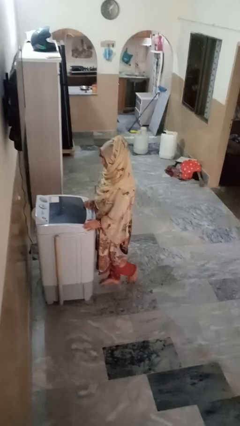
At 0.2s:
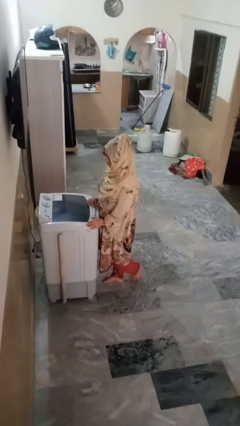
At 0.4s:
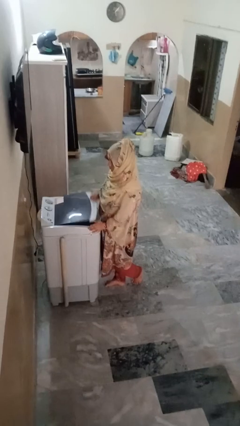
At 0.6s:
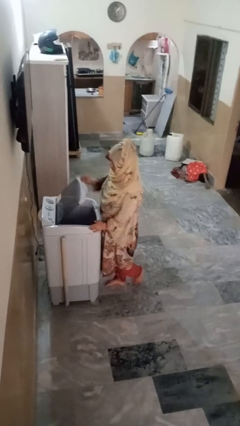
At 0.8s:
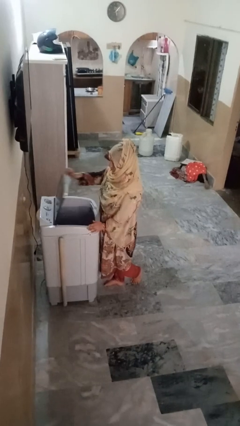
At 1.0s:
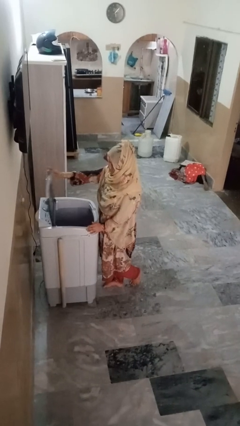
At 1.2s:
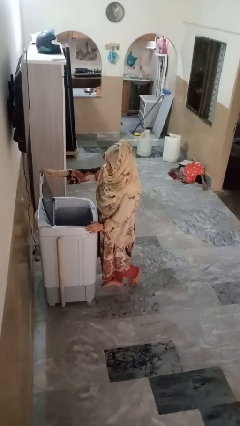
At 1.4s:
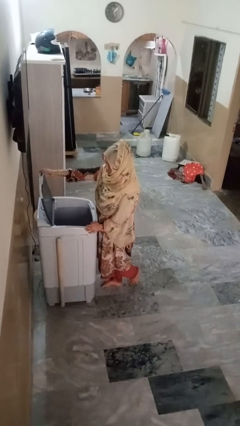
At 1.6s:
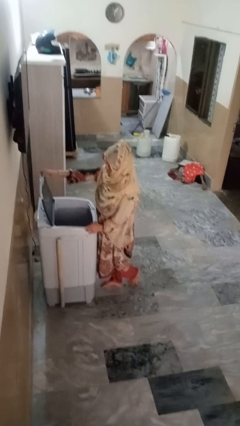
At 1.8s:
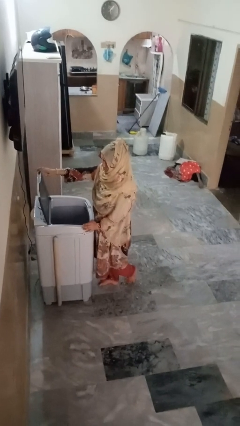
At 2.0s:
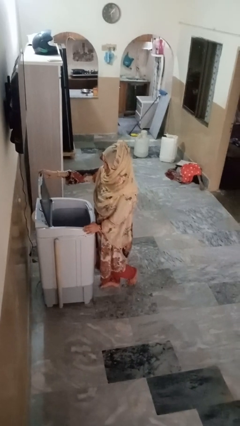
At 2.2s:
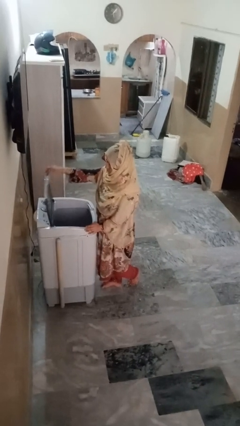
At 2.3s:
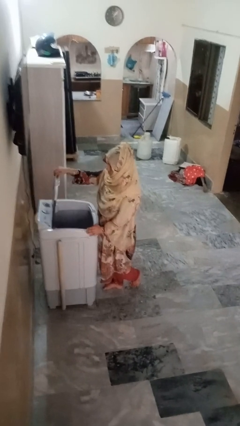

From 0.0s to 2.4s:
person opens clothes washer

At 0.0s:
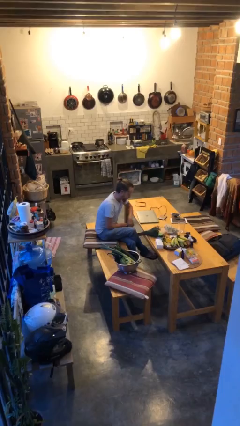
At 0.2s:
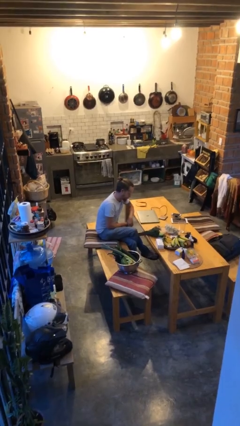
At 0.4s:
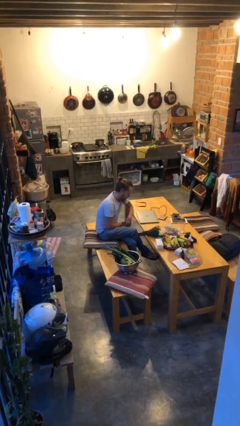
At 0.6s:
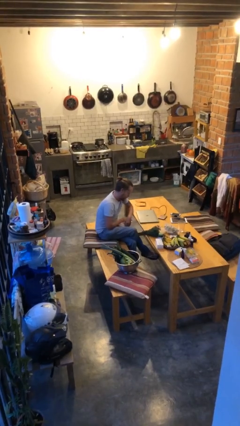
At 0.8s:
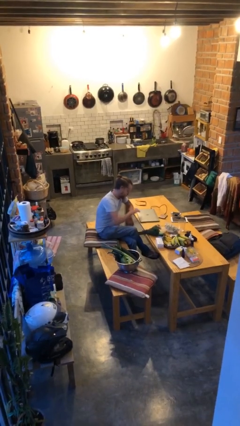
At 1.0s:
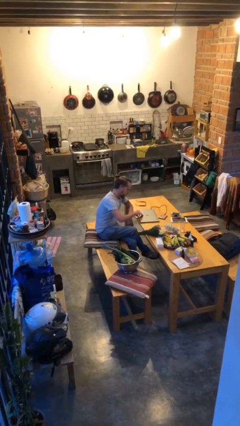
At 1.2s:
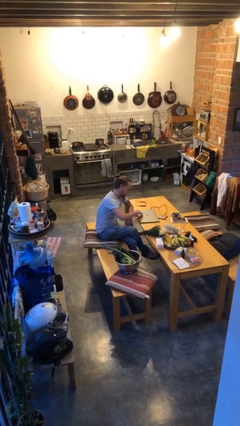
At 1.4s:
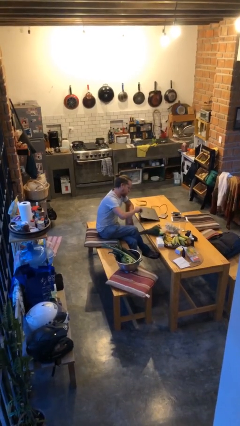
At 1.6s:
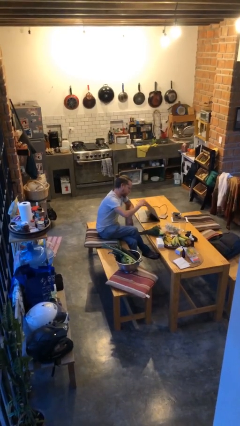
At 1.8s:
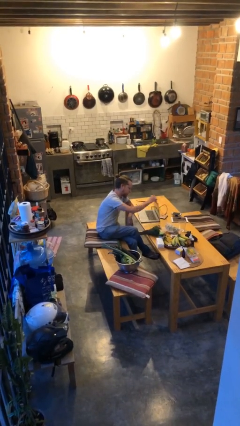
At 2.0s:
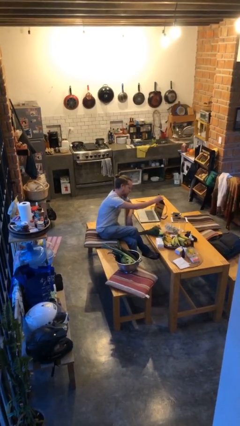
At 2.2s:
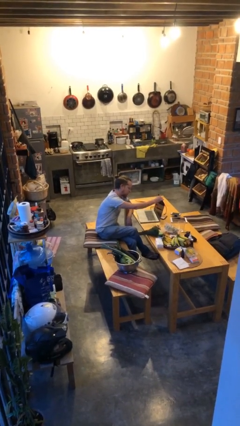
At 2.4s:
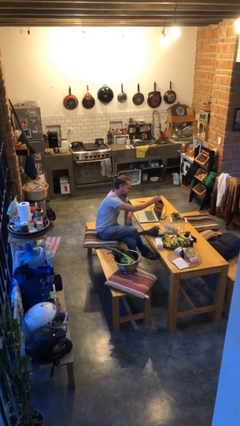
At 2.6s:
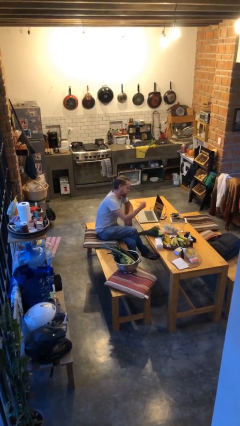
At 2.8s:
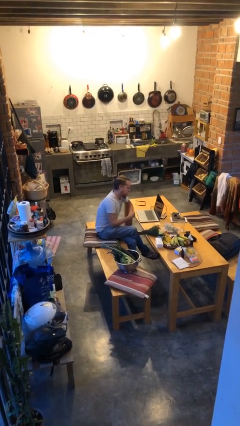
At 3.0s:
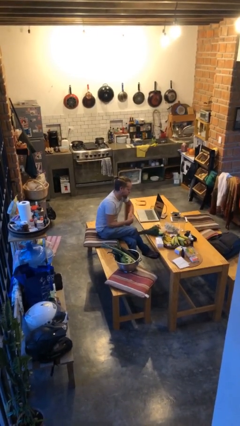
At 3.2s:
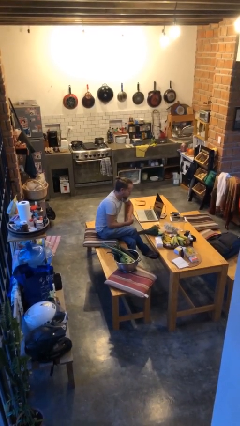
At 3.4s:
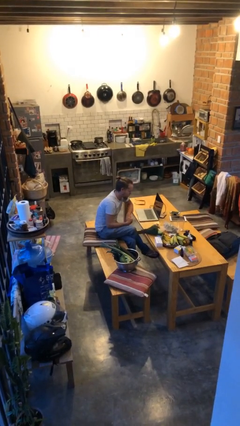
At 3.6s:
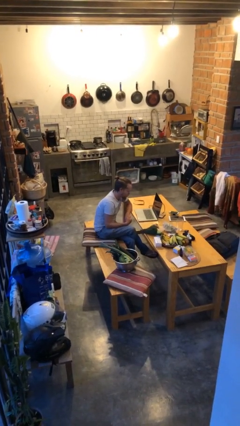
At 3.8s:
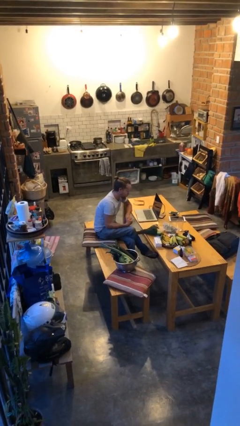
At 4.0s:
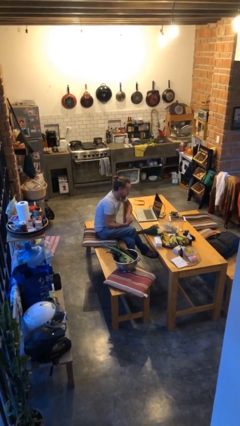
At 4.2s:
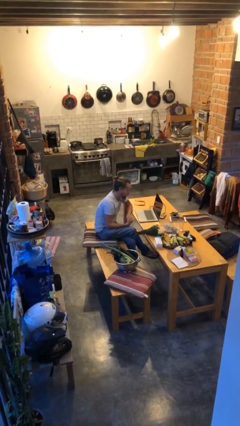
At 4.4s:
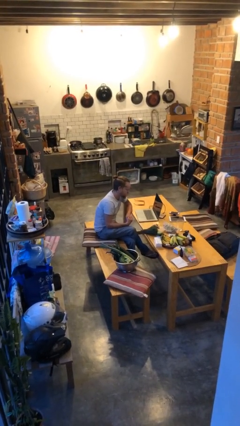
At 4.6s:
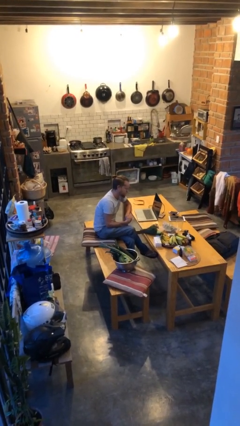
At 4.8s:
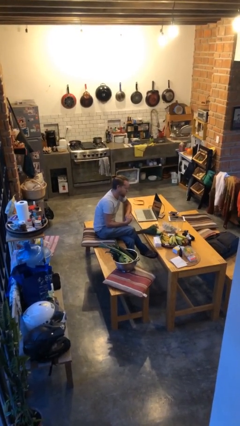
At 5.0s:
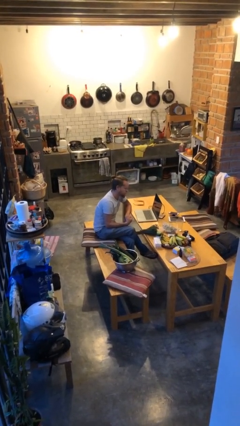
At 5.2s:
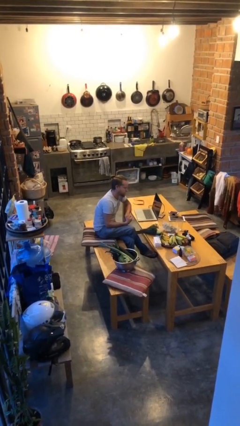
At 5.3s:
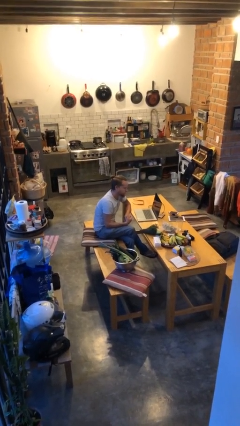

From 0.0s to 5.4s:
person opens laptop

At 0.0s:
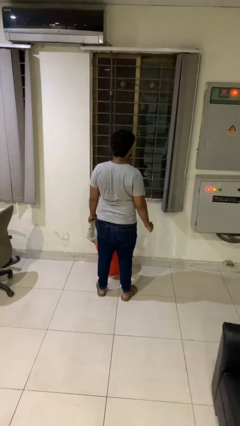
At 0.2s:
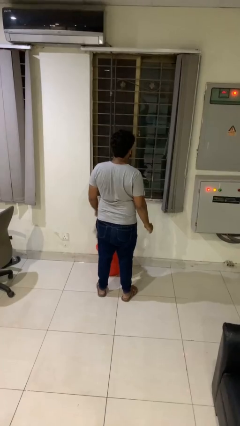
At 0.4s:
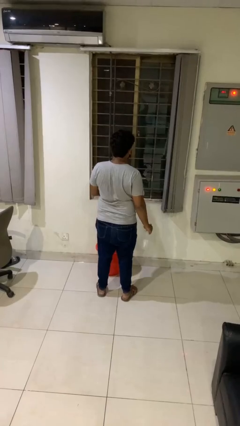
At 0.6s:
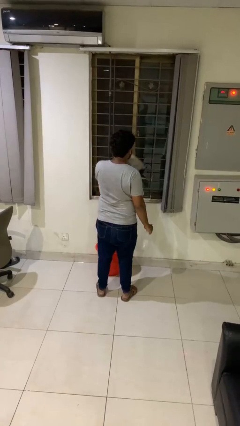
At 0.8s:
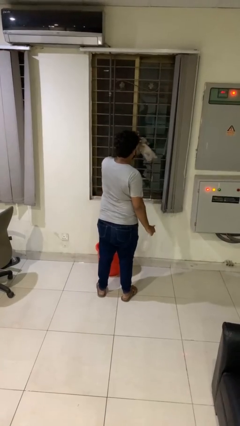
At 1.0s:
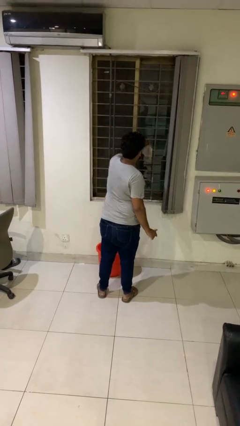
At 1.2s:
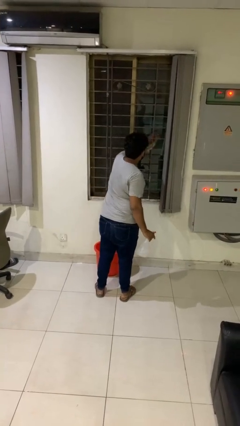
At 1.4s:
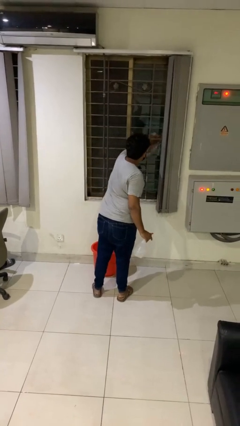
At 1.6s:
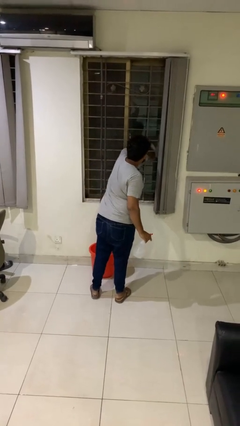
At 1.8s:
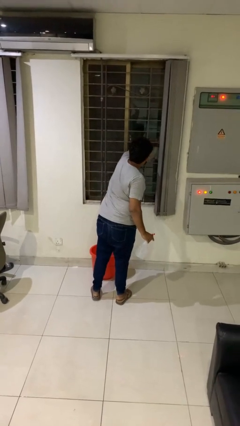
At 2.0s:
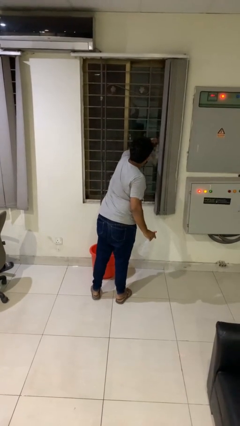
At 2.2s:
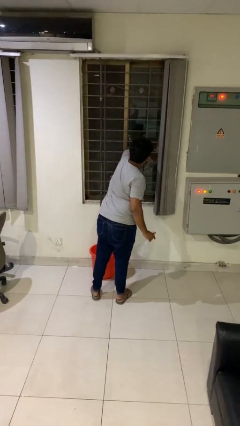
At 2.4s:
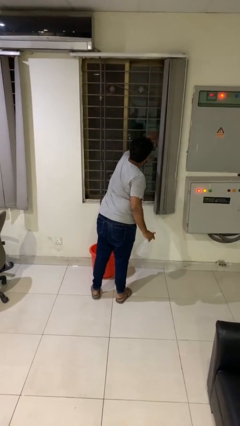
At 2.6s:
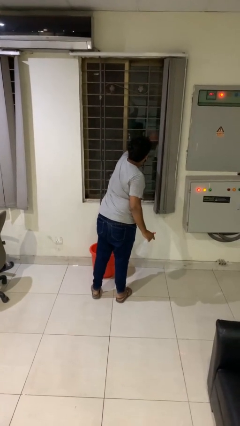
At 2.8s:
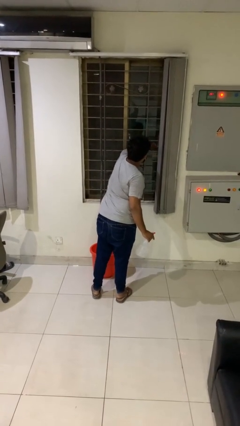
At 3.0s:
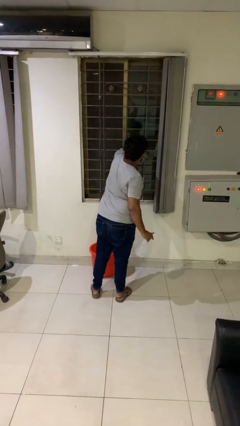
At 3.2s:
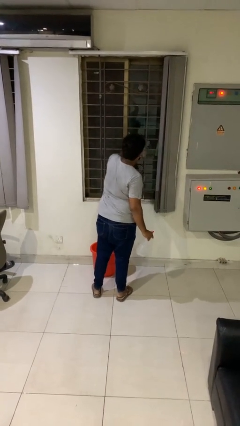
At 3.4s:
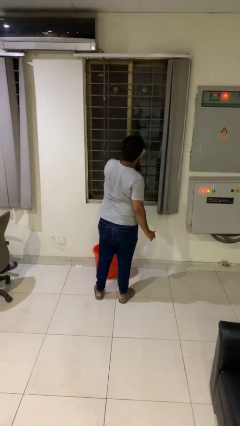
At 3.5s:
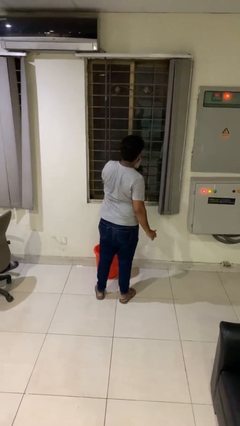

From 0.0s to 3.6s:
person washes window

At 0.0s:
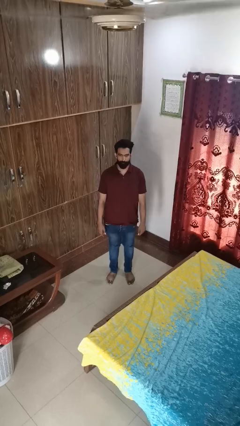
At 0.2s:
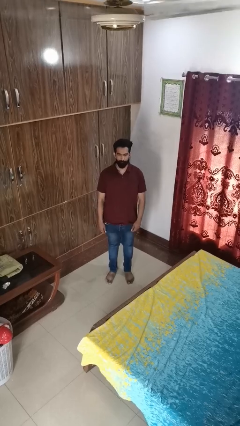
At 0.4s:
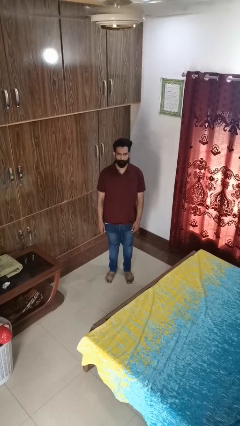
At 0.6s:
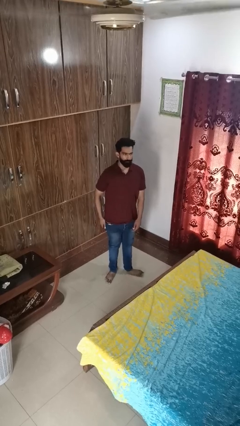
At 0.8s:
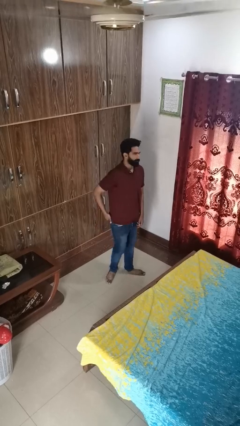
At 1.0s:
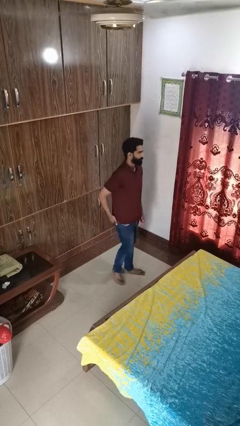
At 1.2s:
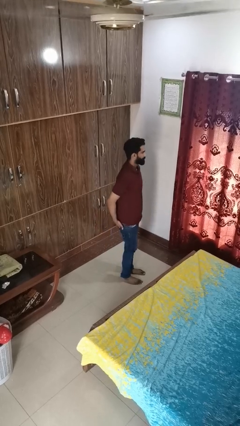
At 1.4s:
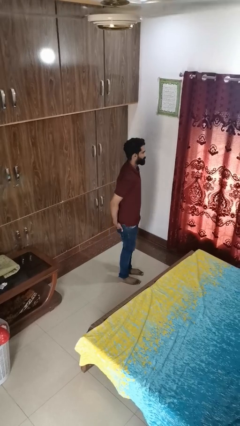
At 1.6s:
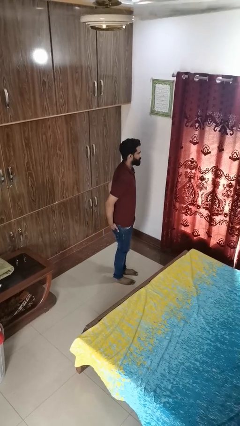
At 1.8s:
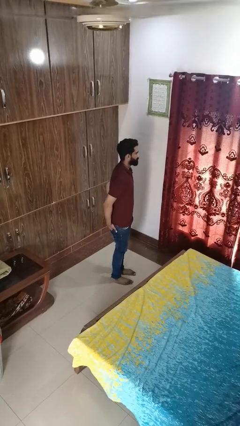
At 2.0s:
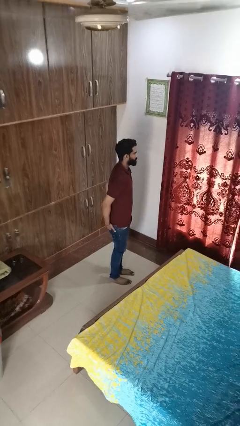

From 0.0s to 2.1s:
person puts hands in back pockets

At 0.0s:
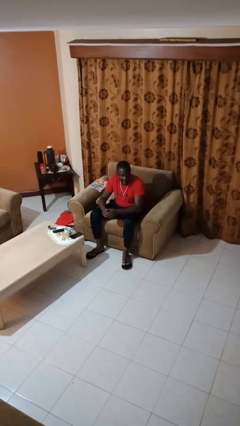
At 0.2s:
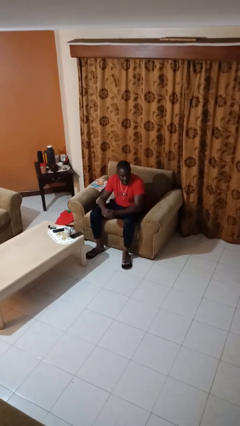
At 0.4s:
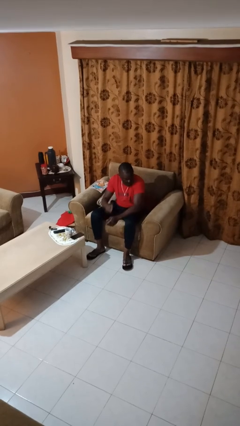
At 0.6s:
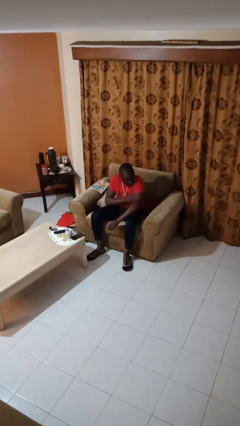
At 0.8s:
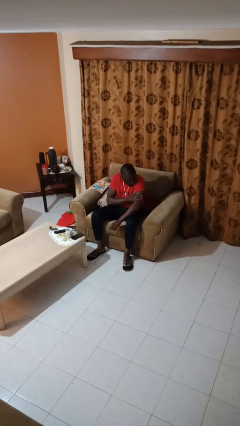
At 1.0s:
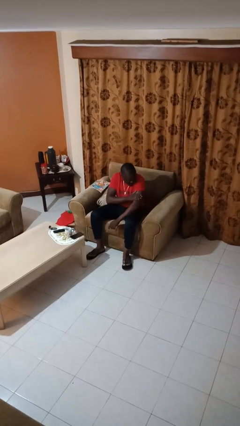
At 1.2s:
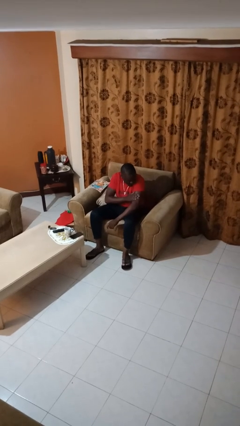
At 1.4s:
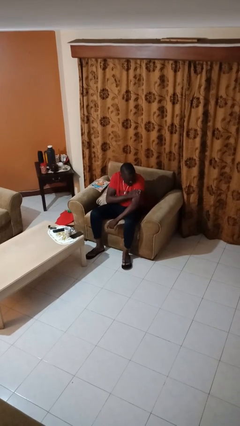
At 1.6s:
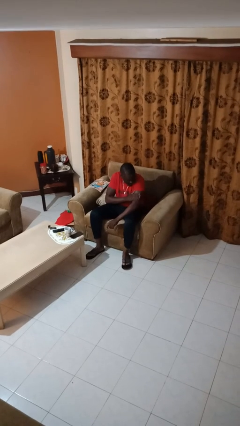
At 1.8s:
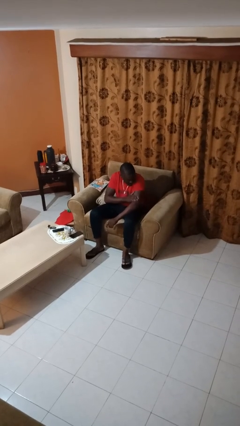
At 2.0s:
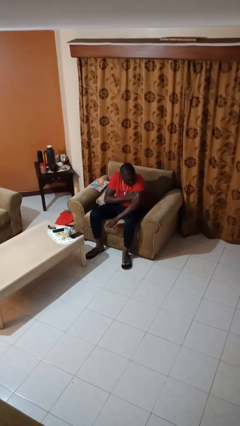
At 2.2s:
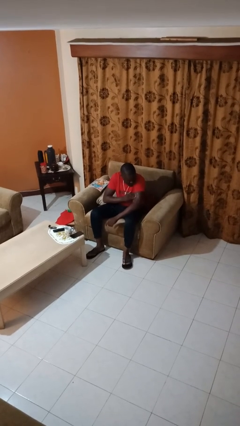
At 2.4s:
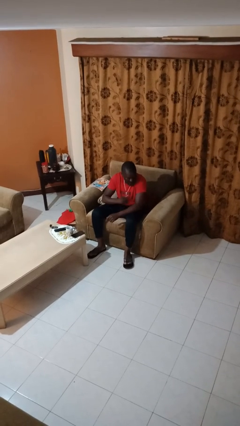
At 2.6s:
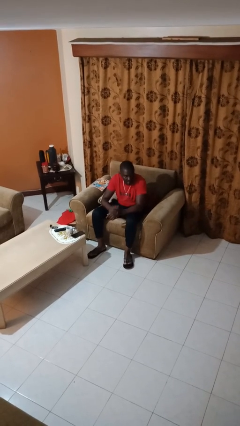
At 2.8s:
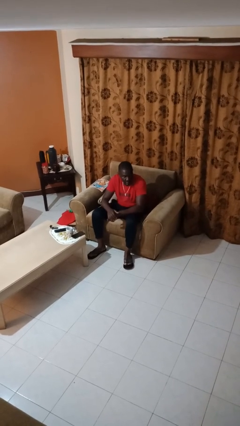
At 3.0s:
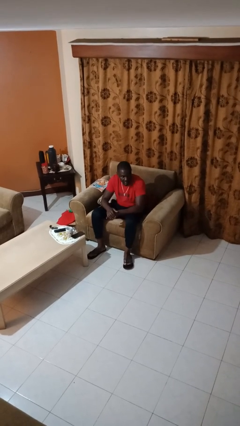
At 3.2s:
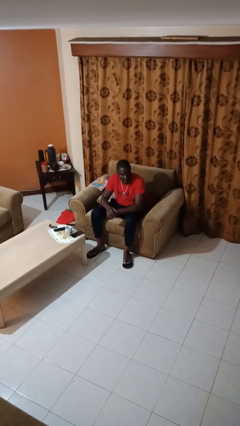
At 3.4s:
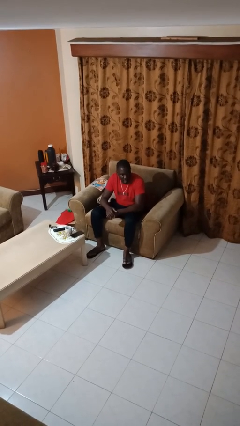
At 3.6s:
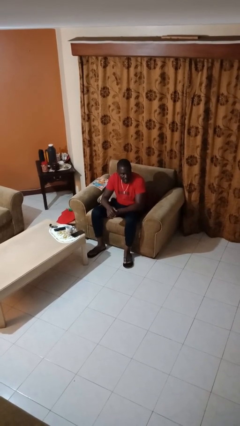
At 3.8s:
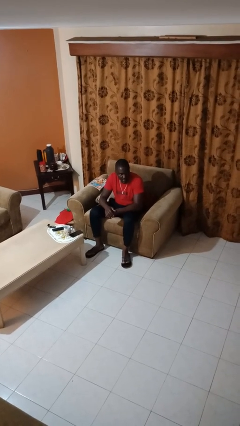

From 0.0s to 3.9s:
person swats bug

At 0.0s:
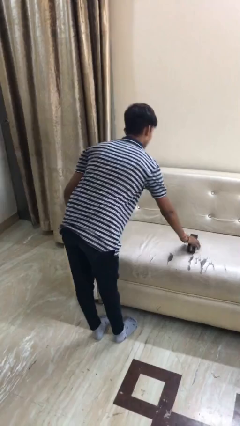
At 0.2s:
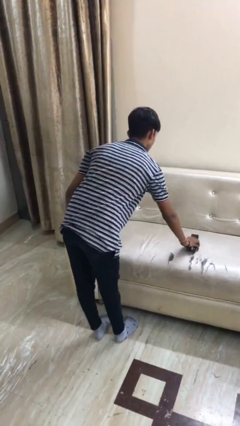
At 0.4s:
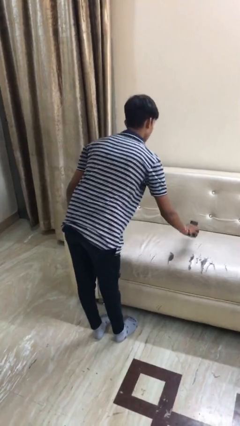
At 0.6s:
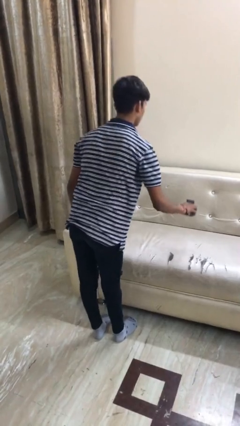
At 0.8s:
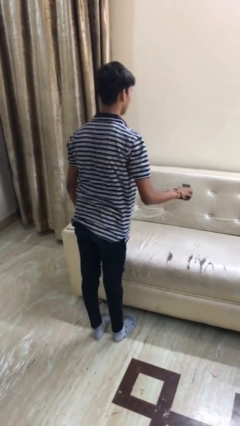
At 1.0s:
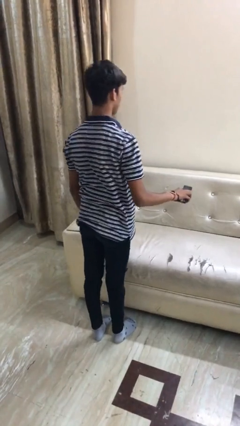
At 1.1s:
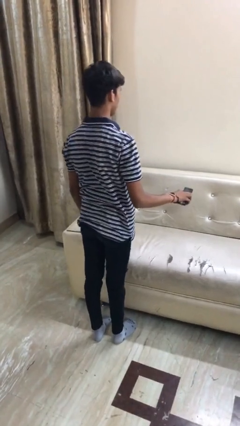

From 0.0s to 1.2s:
person picks up object from bed
